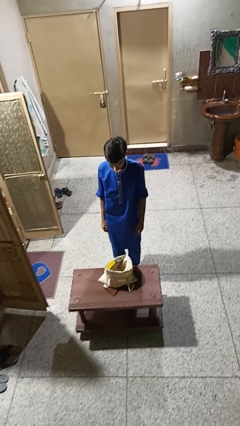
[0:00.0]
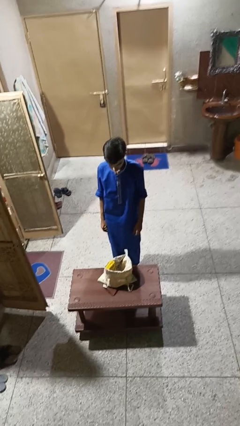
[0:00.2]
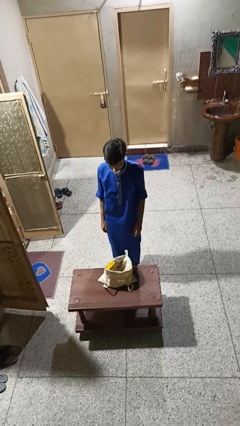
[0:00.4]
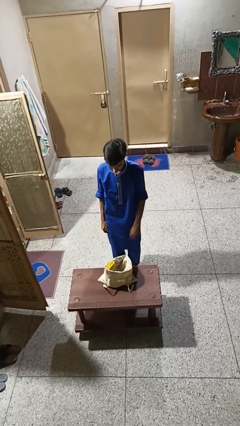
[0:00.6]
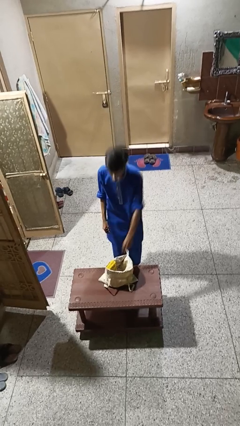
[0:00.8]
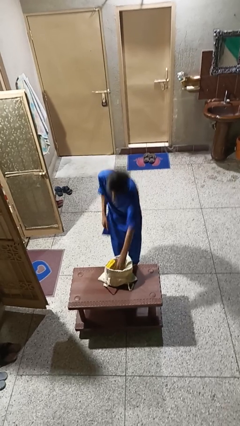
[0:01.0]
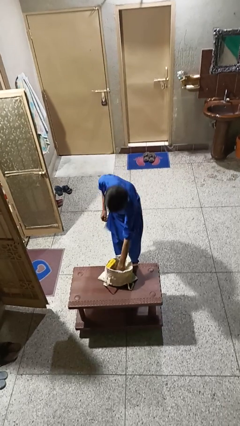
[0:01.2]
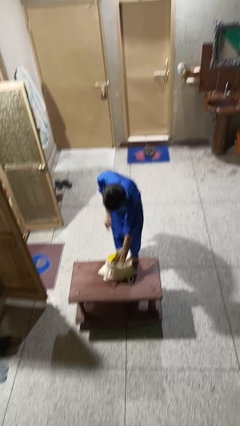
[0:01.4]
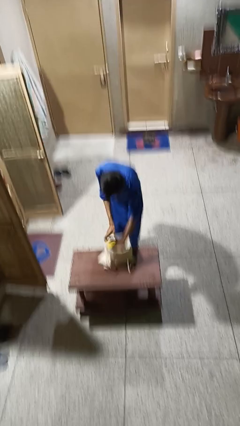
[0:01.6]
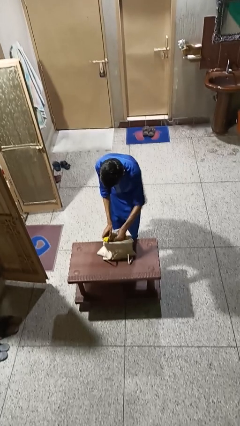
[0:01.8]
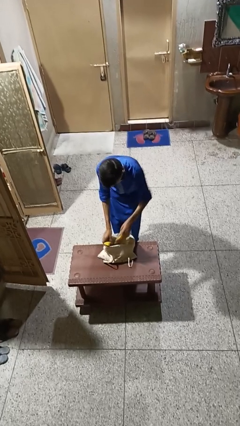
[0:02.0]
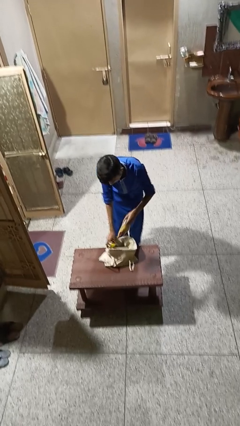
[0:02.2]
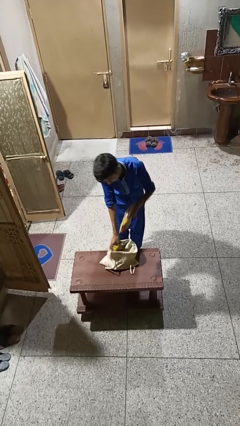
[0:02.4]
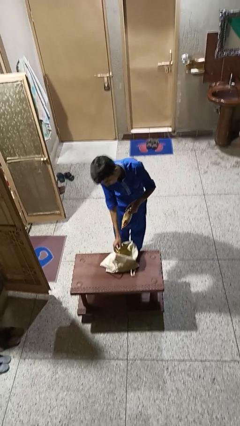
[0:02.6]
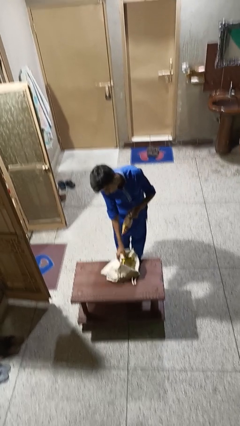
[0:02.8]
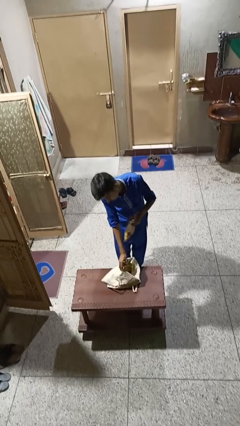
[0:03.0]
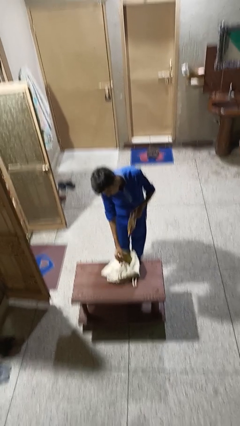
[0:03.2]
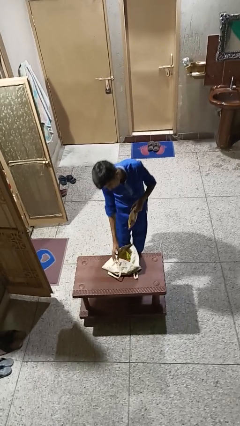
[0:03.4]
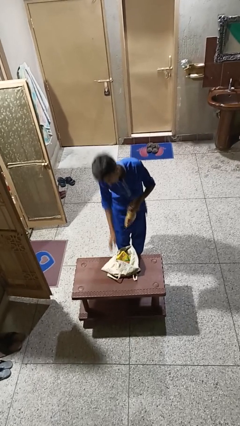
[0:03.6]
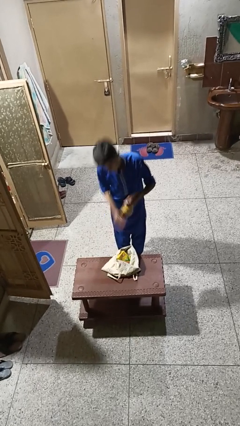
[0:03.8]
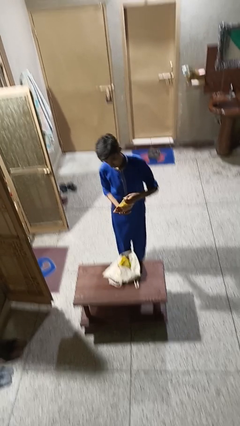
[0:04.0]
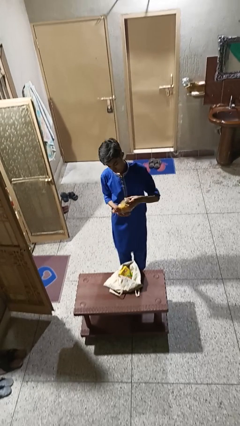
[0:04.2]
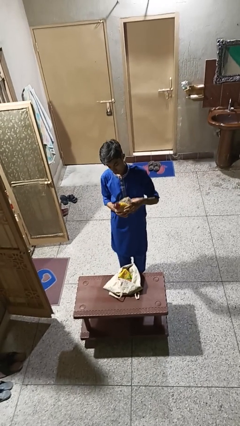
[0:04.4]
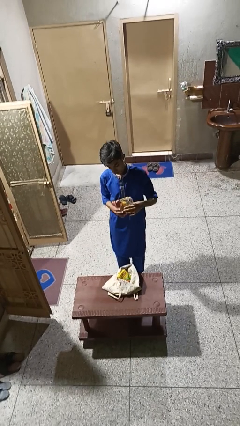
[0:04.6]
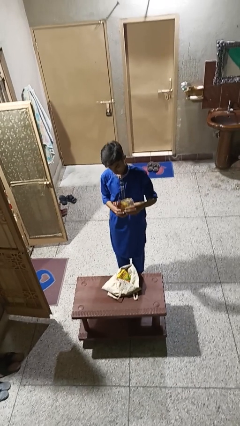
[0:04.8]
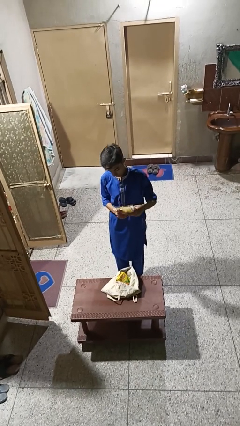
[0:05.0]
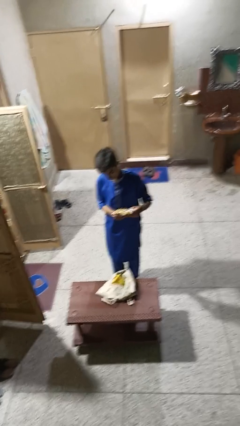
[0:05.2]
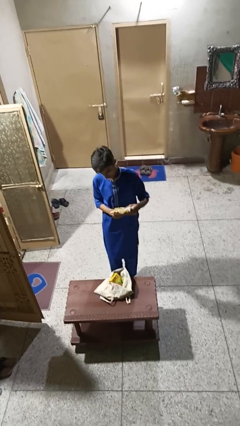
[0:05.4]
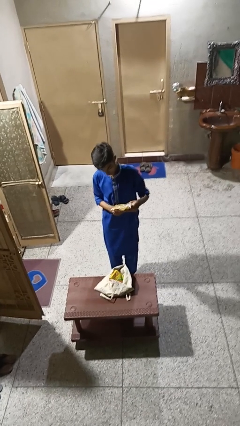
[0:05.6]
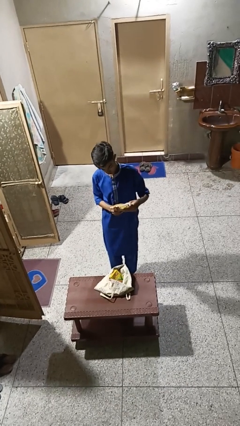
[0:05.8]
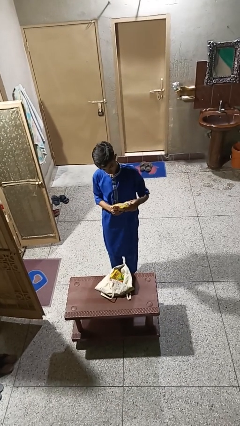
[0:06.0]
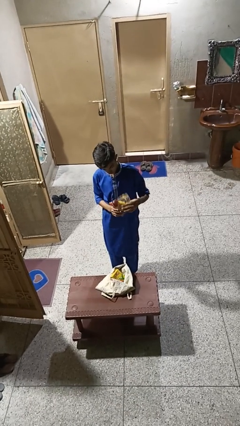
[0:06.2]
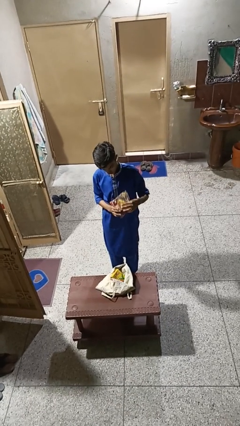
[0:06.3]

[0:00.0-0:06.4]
person takes object from bag

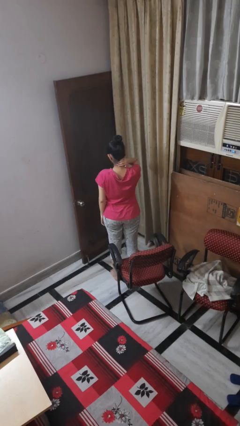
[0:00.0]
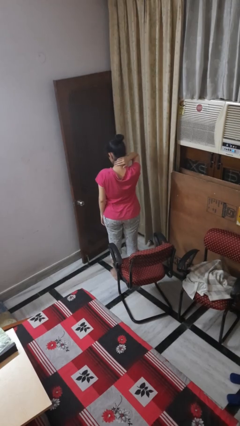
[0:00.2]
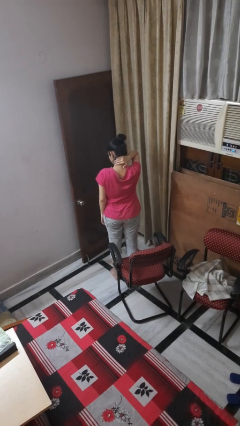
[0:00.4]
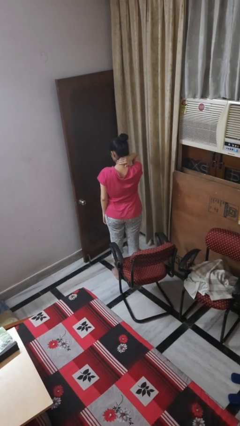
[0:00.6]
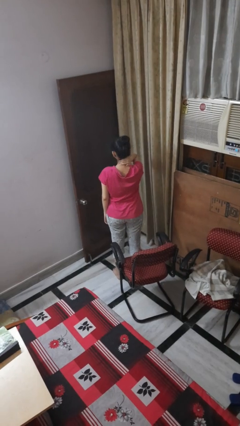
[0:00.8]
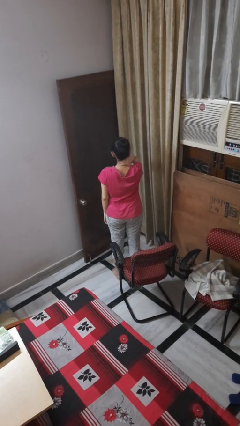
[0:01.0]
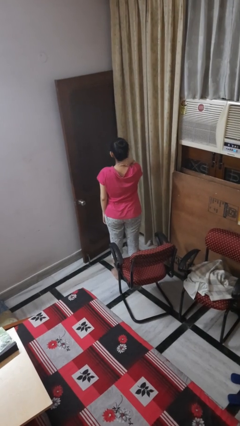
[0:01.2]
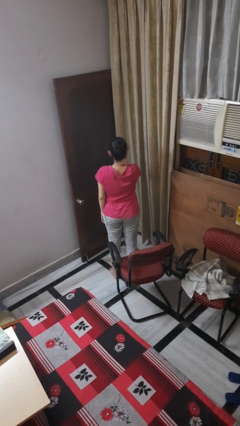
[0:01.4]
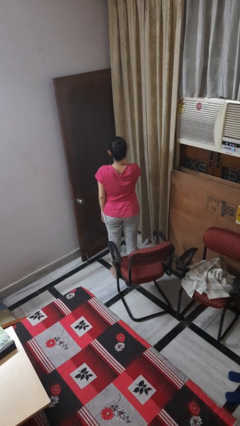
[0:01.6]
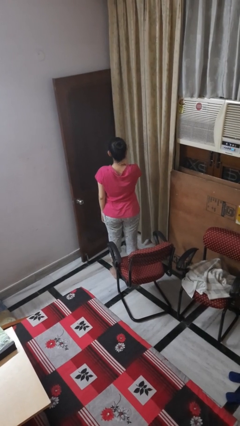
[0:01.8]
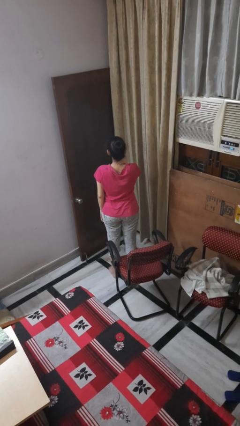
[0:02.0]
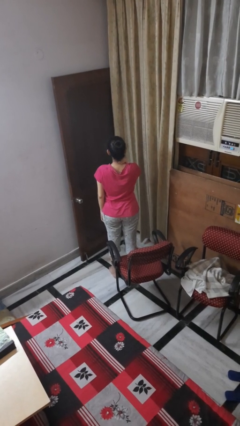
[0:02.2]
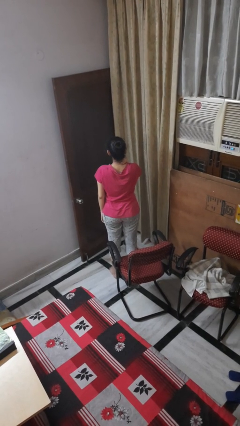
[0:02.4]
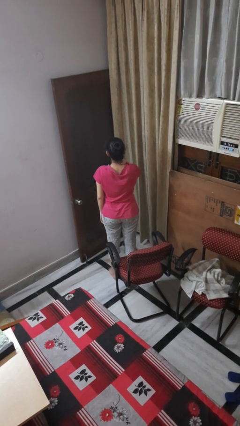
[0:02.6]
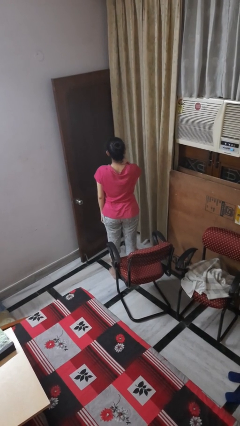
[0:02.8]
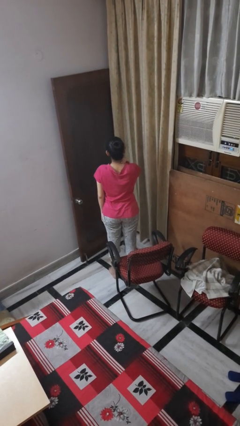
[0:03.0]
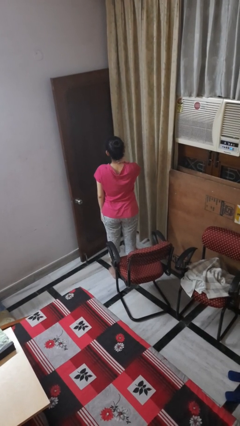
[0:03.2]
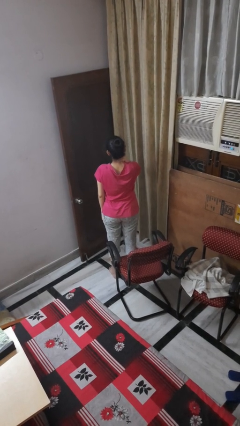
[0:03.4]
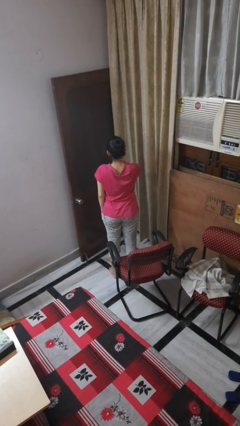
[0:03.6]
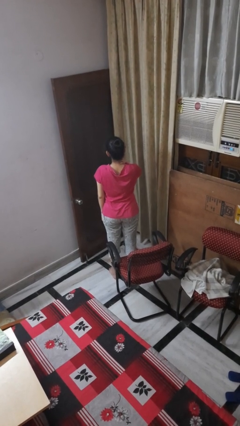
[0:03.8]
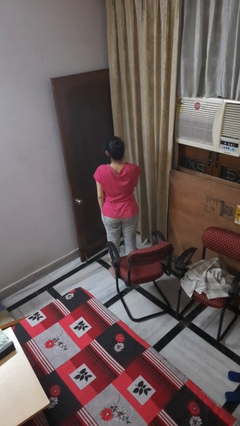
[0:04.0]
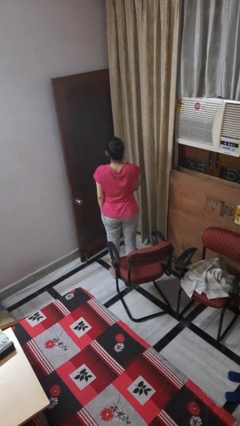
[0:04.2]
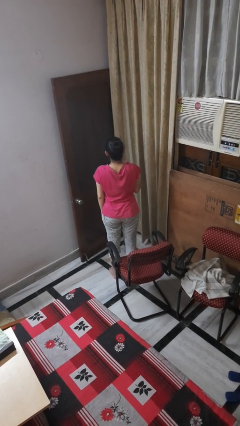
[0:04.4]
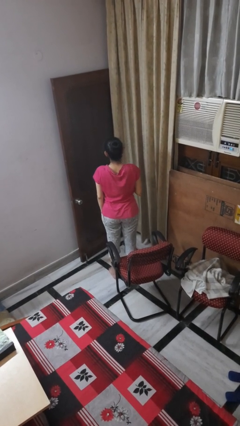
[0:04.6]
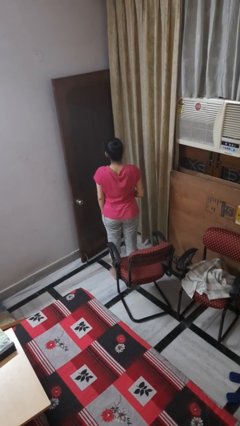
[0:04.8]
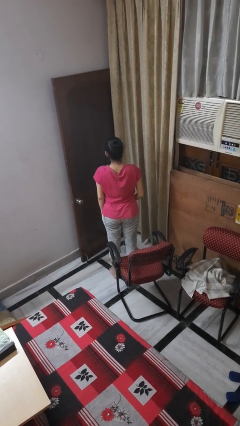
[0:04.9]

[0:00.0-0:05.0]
person rubs neck

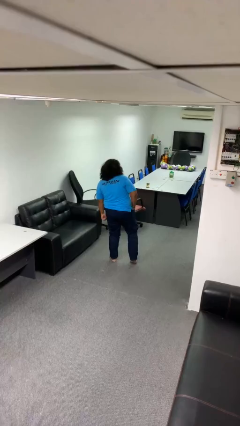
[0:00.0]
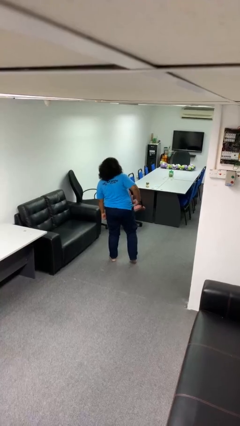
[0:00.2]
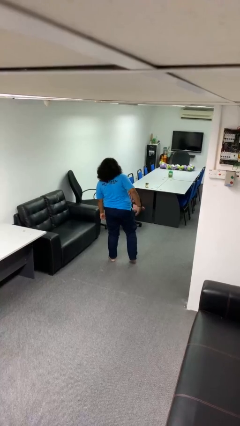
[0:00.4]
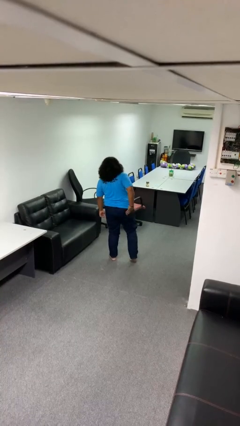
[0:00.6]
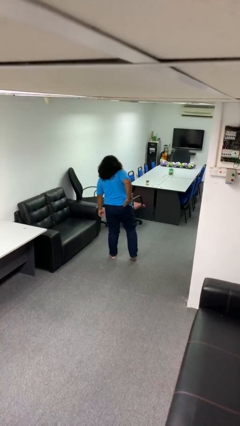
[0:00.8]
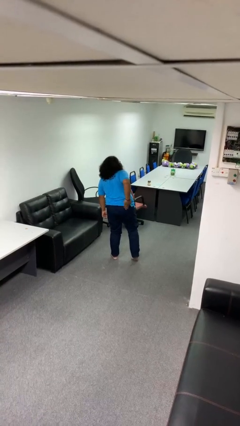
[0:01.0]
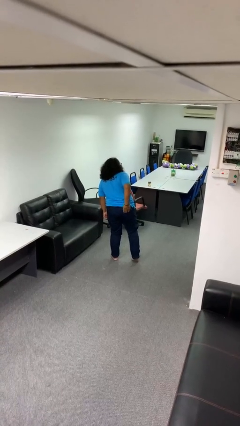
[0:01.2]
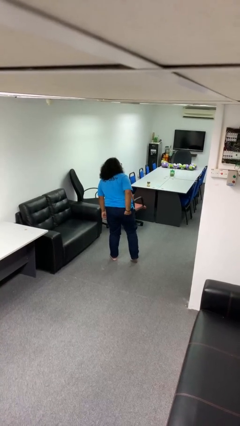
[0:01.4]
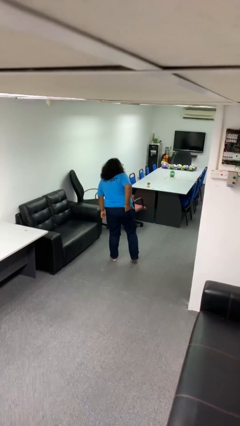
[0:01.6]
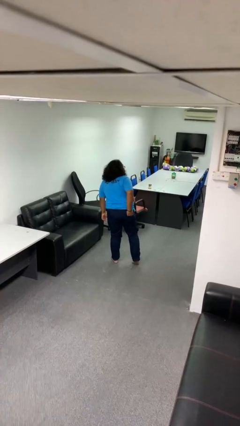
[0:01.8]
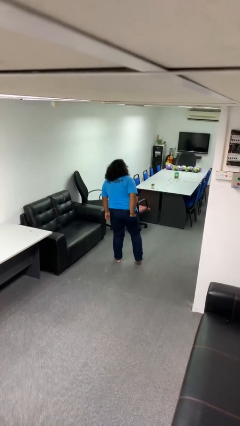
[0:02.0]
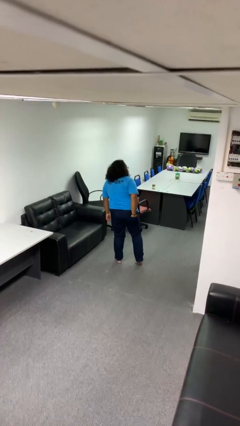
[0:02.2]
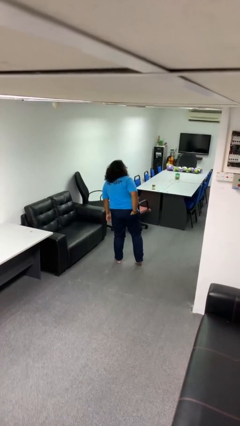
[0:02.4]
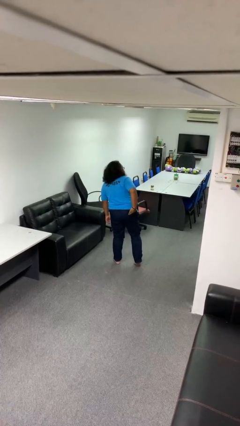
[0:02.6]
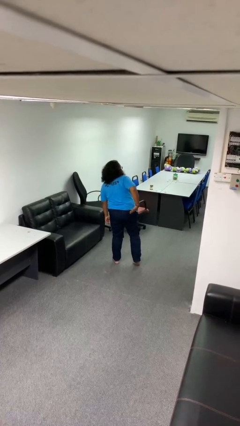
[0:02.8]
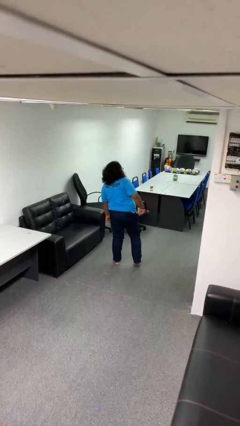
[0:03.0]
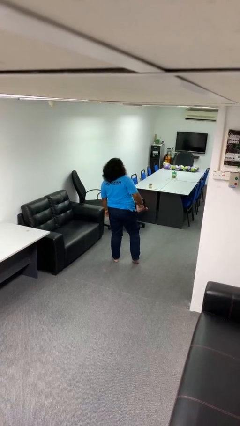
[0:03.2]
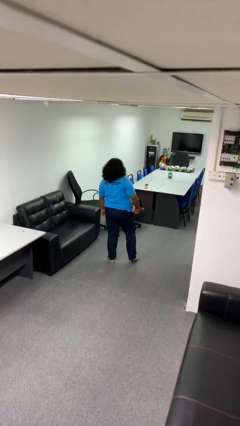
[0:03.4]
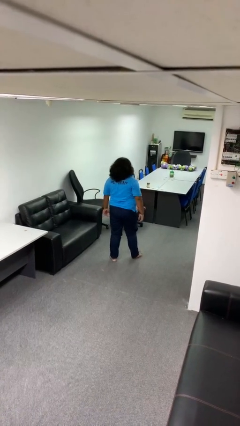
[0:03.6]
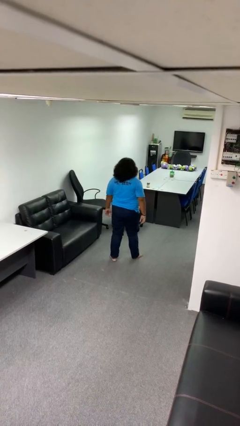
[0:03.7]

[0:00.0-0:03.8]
person puts hands in back pockets

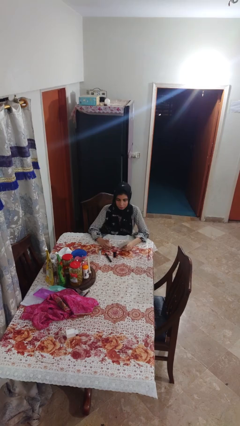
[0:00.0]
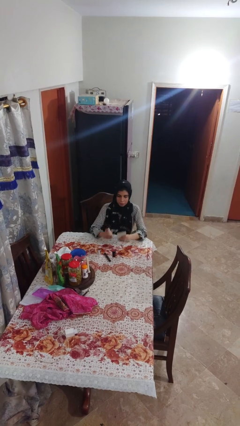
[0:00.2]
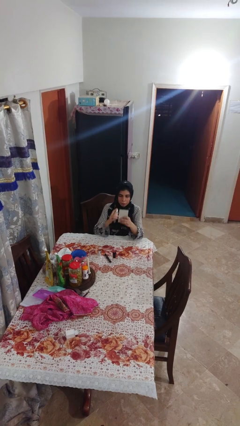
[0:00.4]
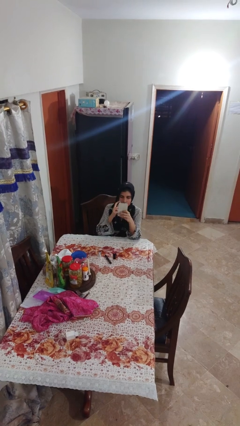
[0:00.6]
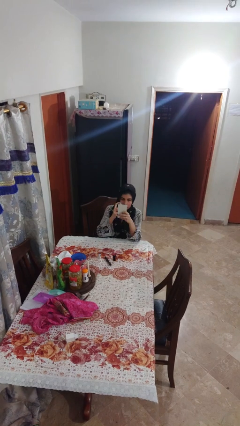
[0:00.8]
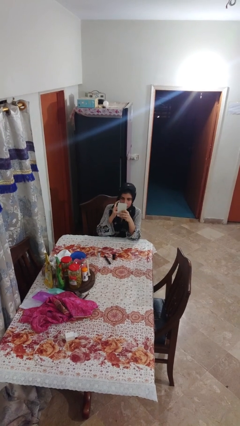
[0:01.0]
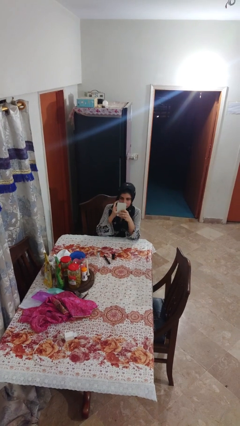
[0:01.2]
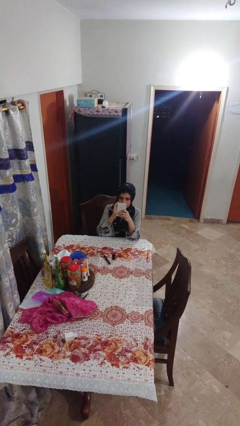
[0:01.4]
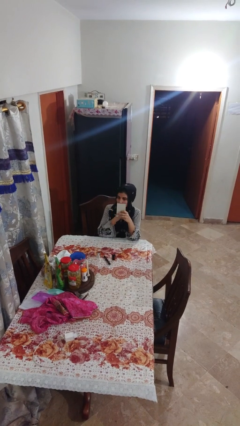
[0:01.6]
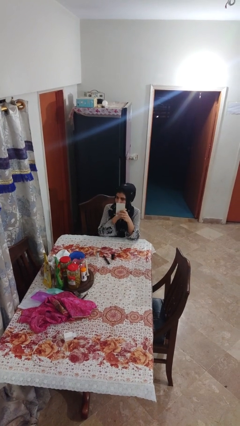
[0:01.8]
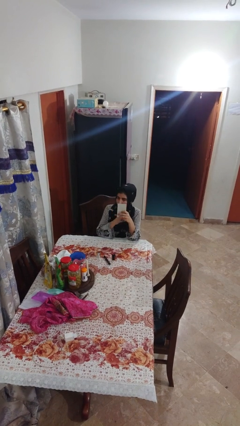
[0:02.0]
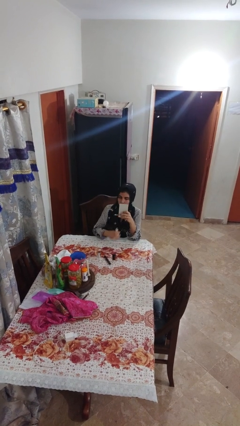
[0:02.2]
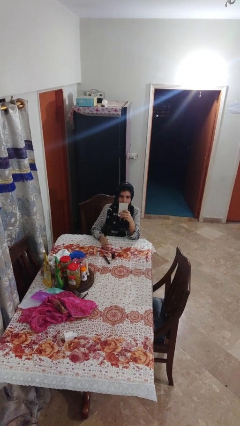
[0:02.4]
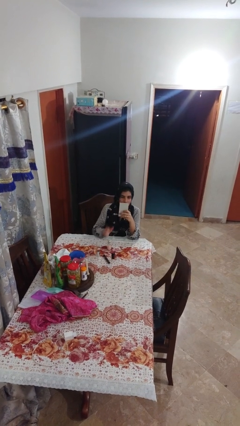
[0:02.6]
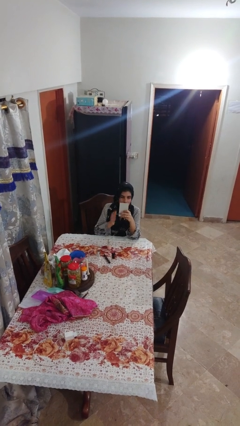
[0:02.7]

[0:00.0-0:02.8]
person applies foundation makeup
